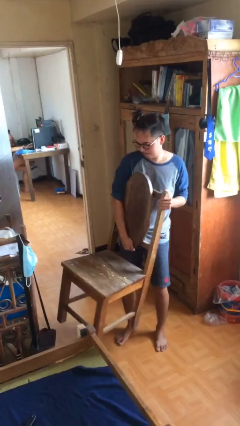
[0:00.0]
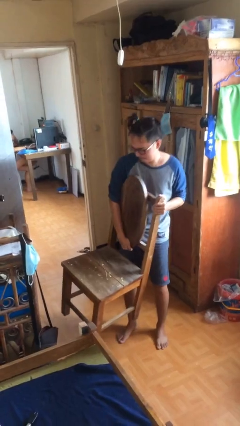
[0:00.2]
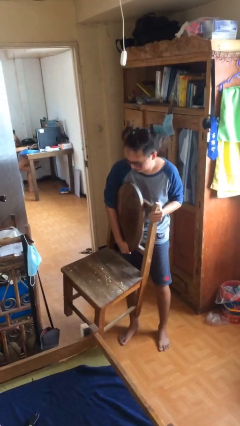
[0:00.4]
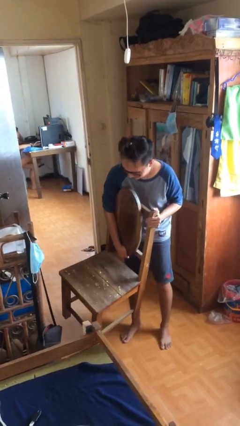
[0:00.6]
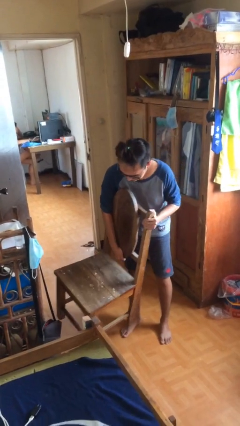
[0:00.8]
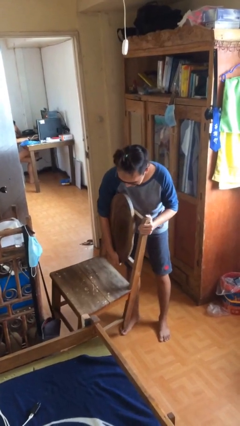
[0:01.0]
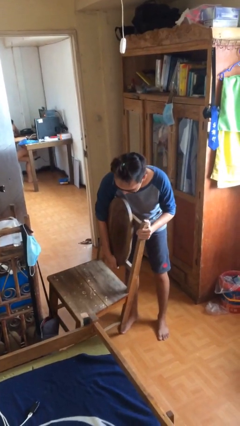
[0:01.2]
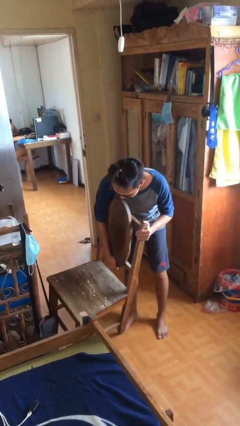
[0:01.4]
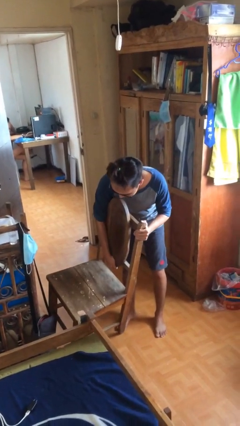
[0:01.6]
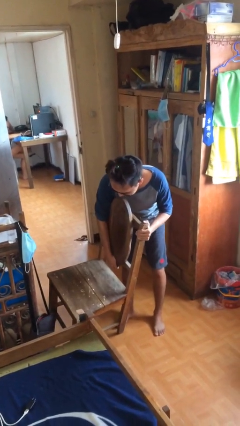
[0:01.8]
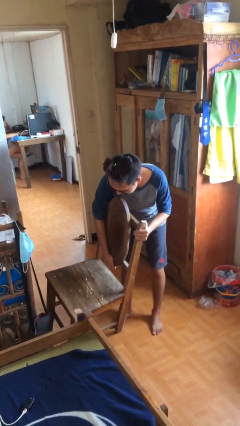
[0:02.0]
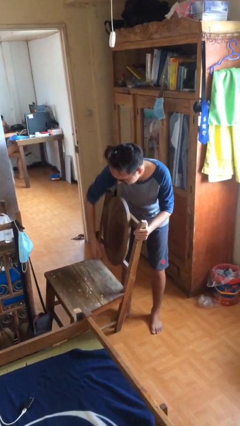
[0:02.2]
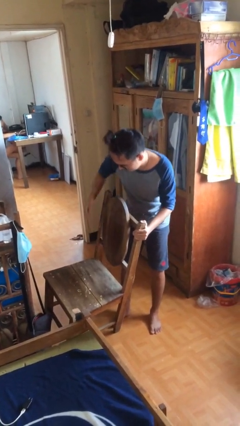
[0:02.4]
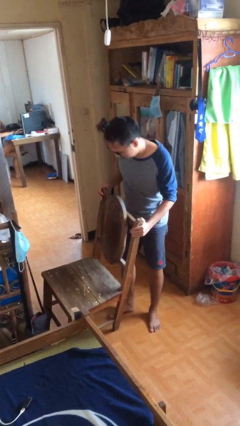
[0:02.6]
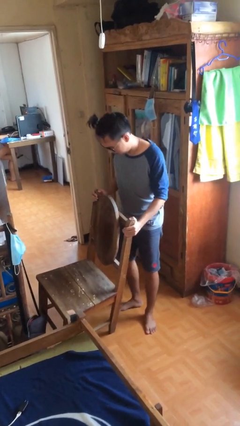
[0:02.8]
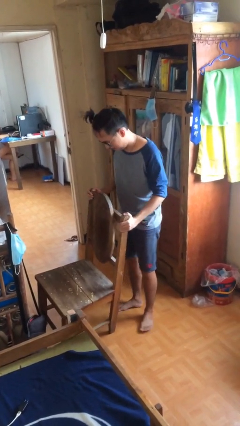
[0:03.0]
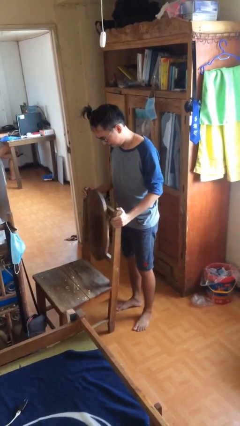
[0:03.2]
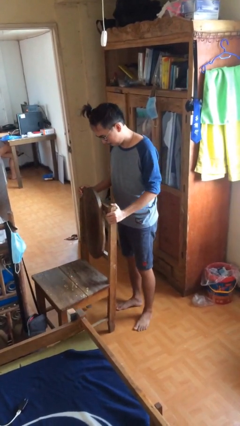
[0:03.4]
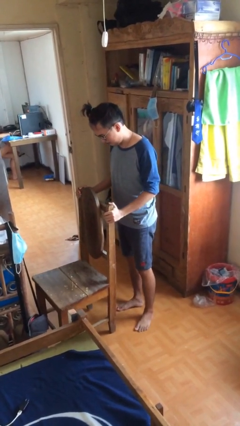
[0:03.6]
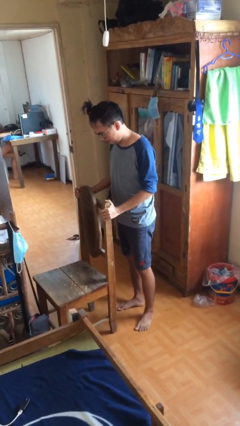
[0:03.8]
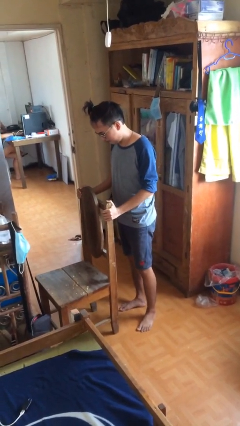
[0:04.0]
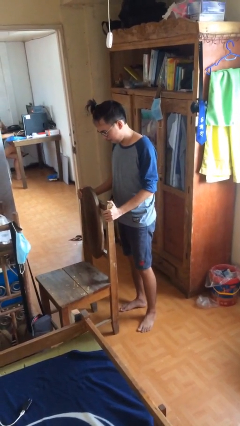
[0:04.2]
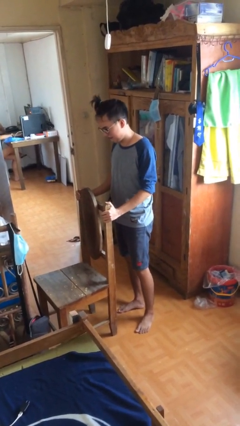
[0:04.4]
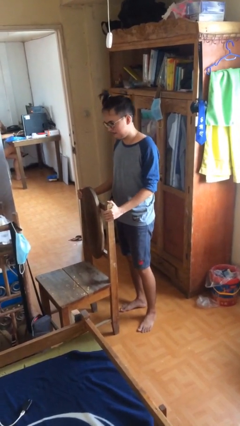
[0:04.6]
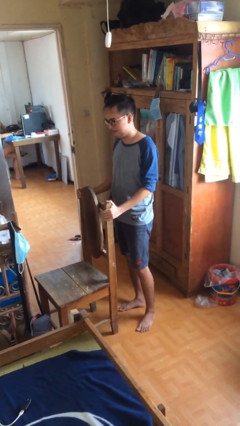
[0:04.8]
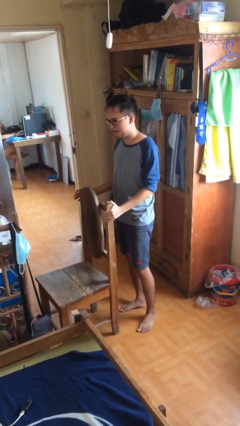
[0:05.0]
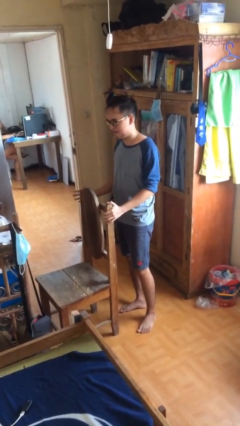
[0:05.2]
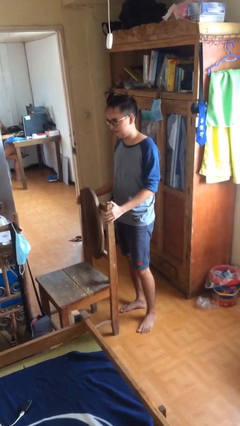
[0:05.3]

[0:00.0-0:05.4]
person puts down object on floor

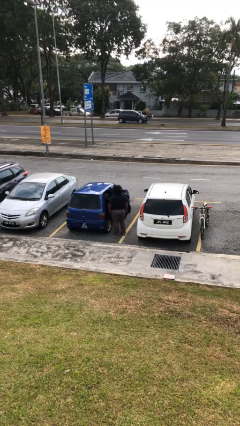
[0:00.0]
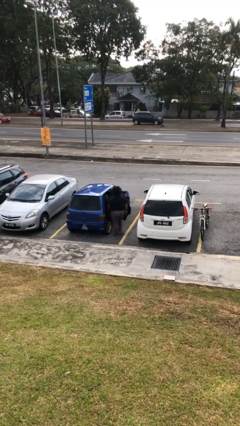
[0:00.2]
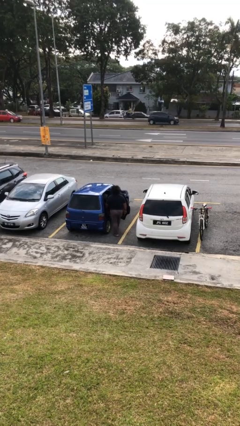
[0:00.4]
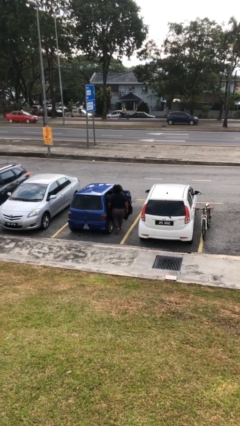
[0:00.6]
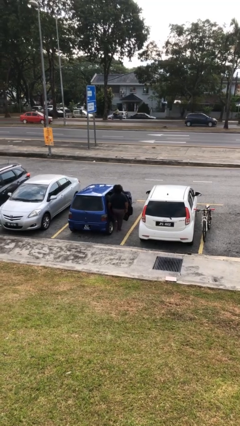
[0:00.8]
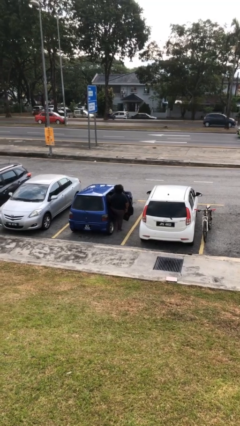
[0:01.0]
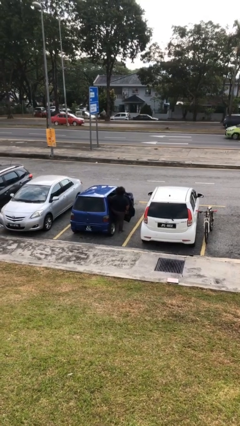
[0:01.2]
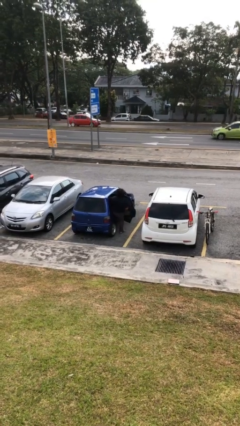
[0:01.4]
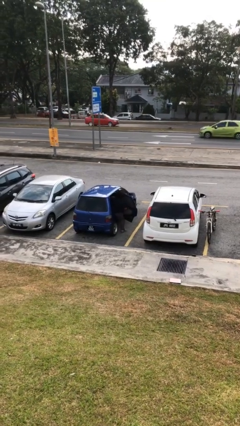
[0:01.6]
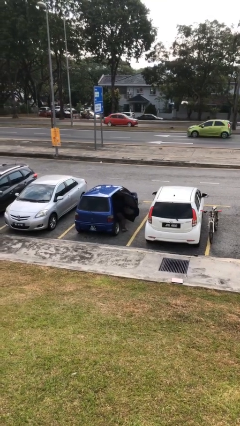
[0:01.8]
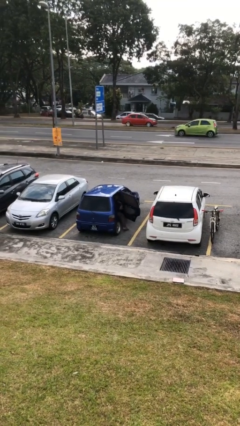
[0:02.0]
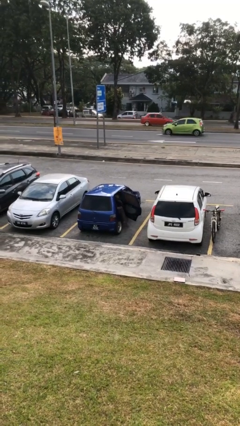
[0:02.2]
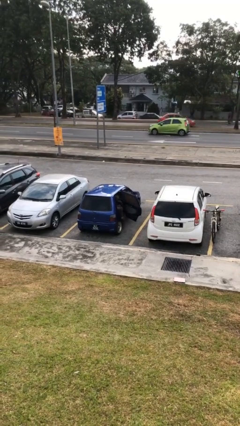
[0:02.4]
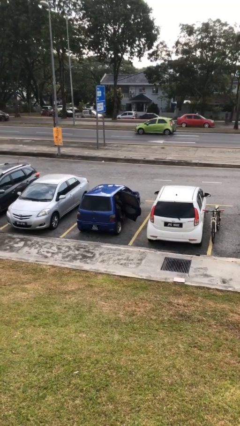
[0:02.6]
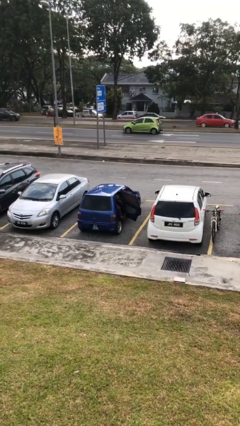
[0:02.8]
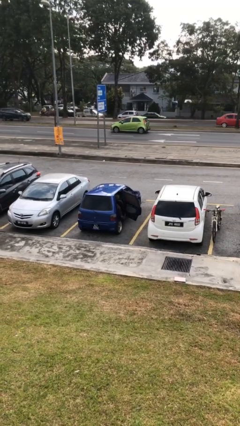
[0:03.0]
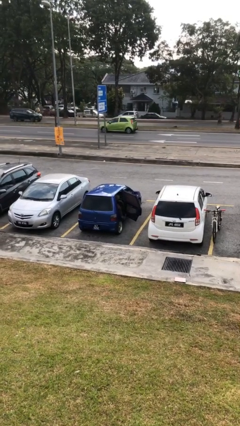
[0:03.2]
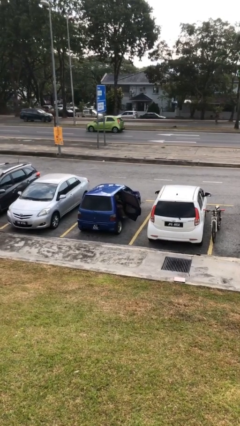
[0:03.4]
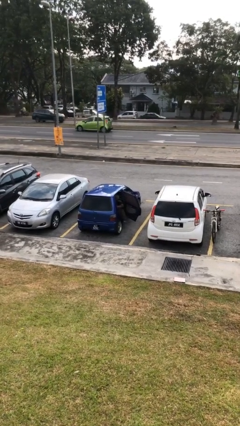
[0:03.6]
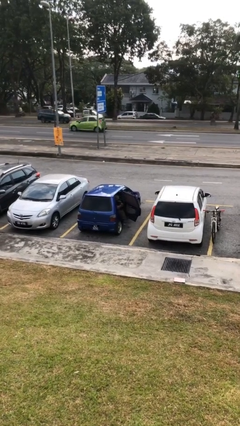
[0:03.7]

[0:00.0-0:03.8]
person enters car

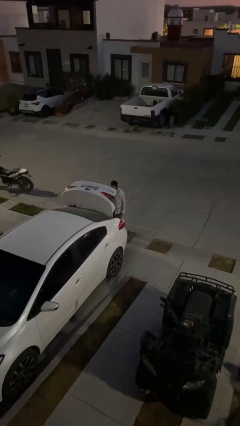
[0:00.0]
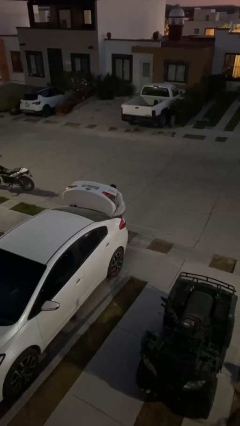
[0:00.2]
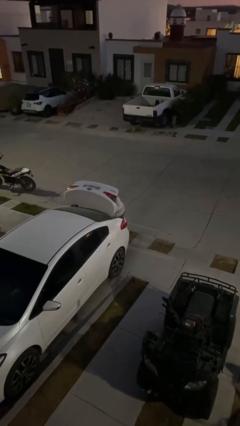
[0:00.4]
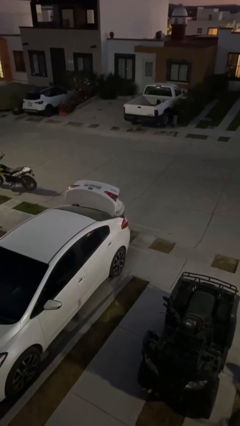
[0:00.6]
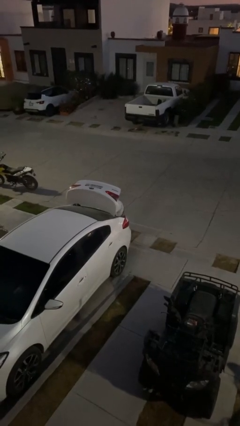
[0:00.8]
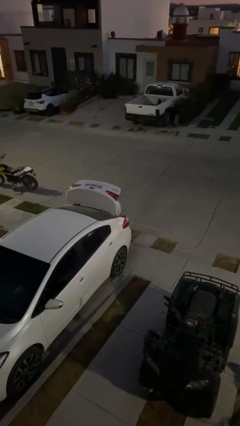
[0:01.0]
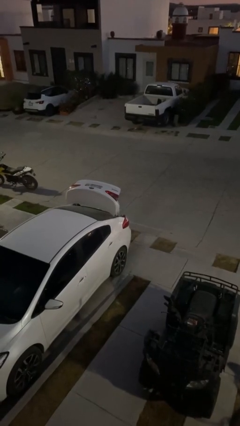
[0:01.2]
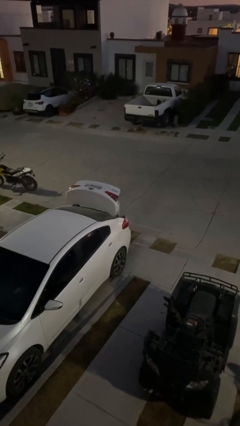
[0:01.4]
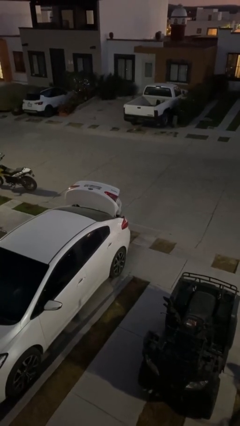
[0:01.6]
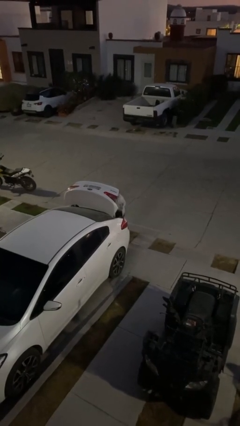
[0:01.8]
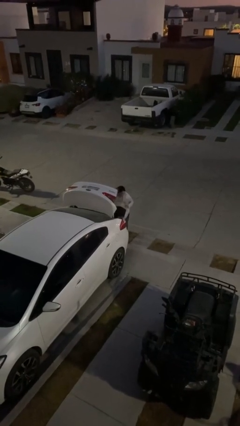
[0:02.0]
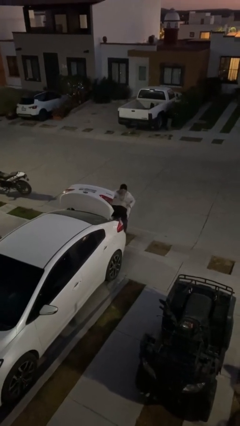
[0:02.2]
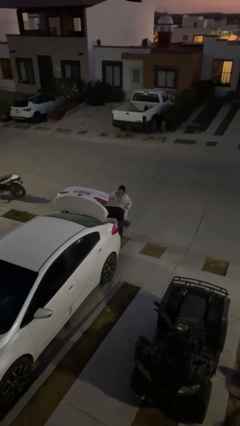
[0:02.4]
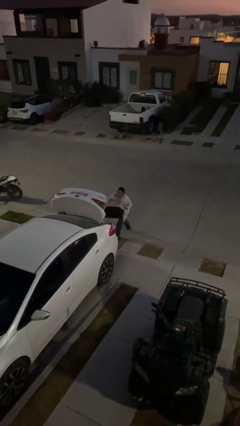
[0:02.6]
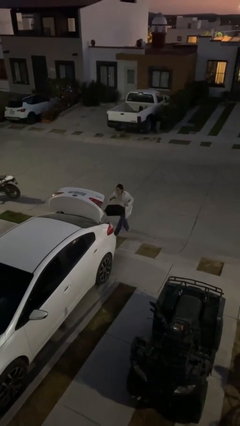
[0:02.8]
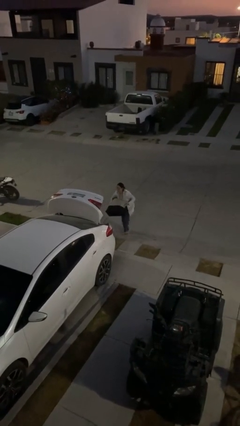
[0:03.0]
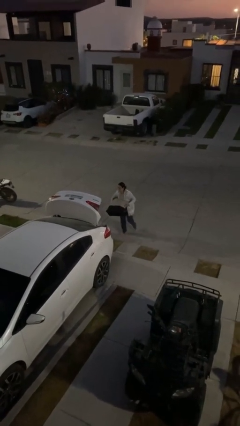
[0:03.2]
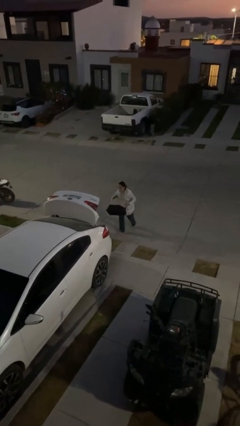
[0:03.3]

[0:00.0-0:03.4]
person unloads car

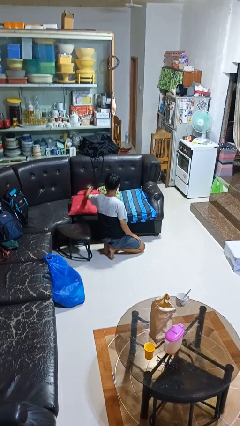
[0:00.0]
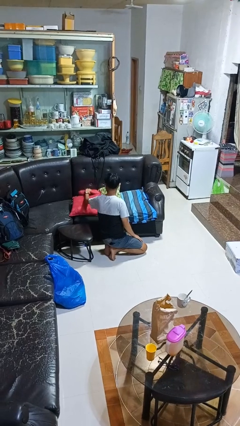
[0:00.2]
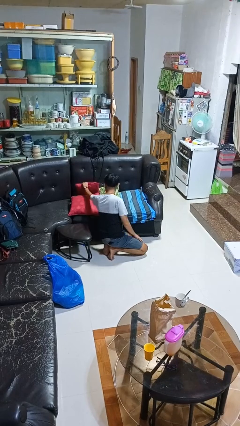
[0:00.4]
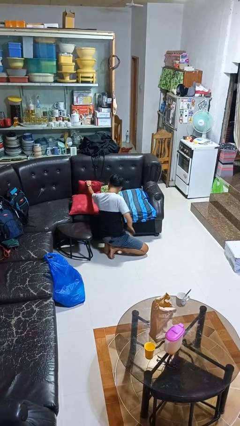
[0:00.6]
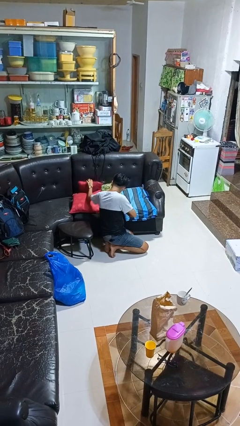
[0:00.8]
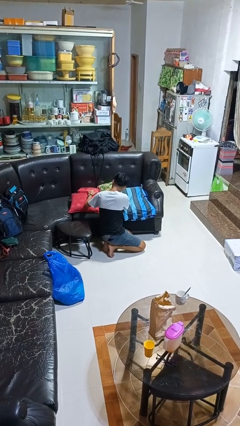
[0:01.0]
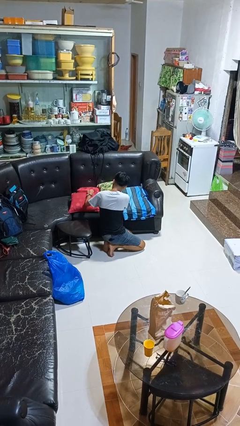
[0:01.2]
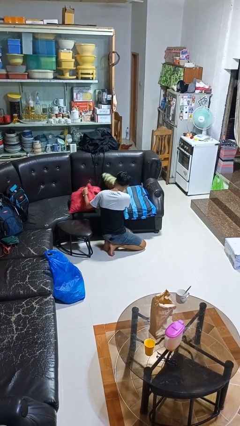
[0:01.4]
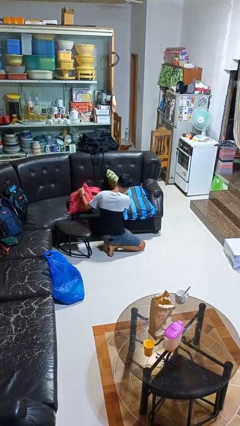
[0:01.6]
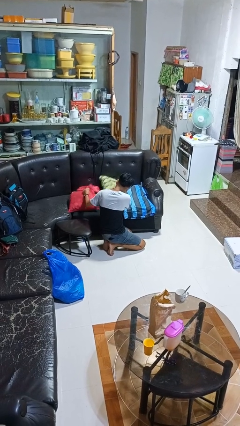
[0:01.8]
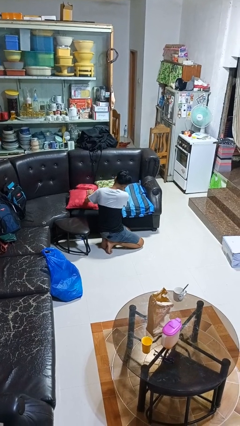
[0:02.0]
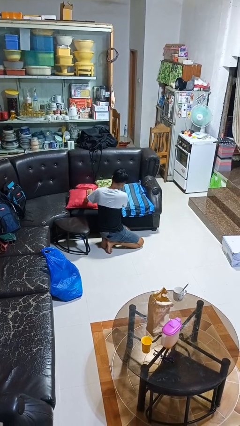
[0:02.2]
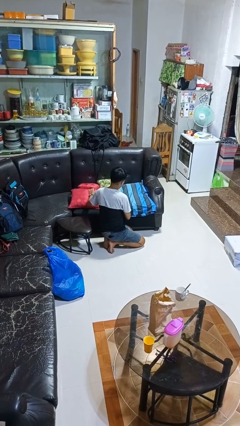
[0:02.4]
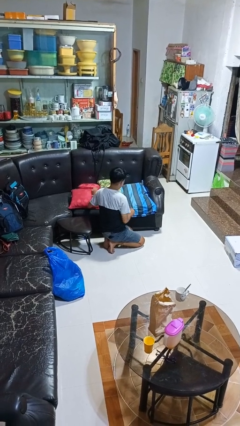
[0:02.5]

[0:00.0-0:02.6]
person searches in couch

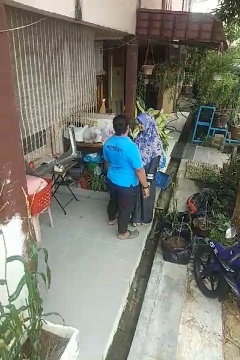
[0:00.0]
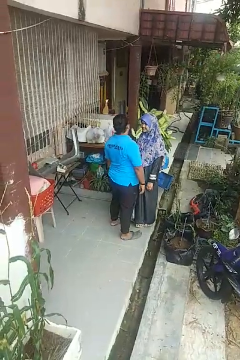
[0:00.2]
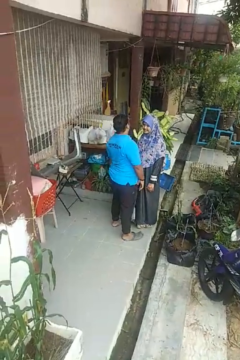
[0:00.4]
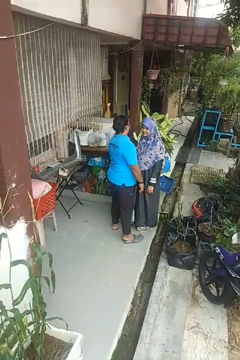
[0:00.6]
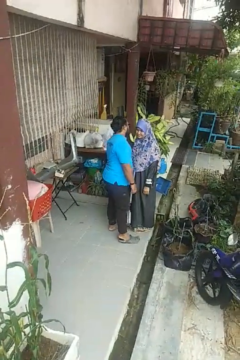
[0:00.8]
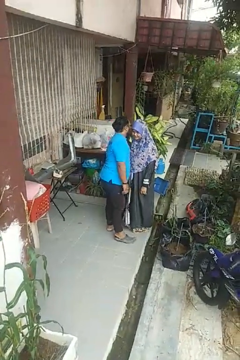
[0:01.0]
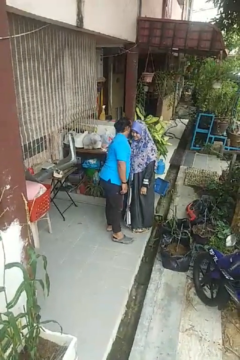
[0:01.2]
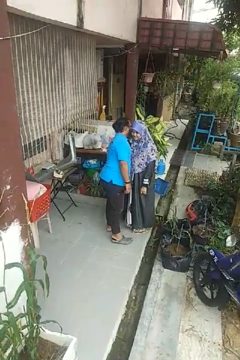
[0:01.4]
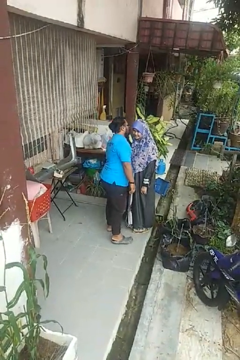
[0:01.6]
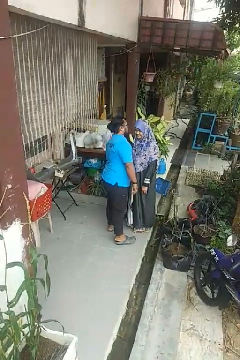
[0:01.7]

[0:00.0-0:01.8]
person kisses cheek of person

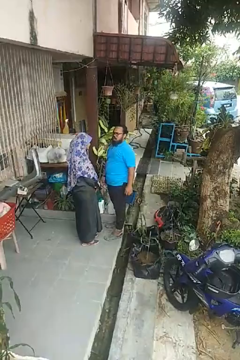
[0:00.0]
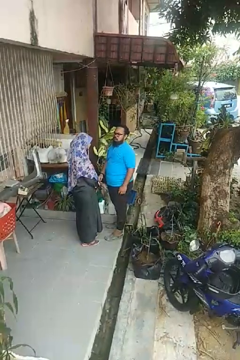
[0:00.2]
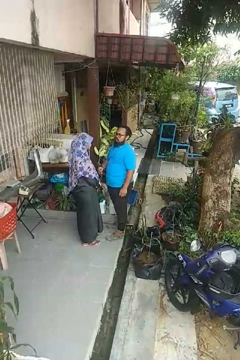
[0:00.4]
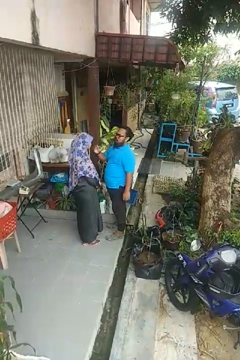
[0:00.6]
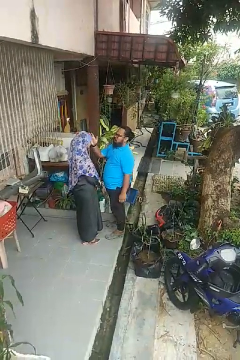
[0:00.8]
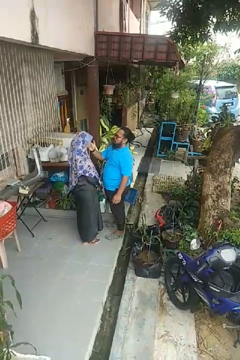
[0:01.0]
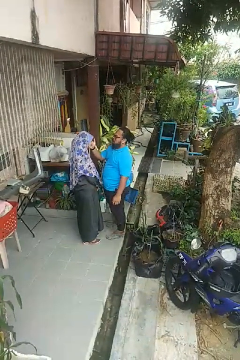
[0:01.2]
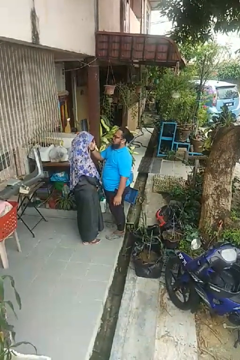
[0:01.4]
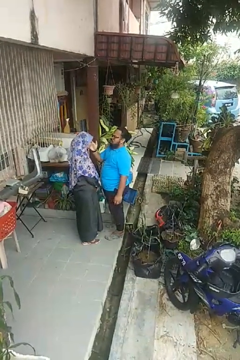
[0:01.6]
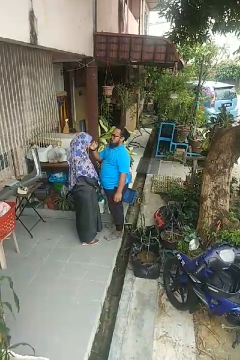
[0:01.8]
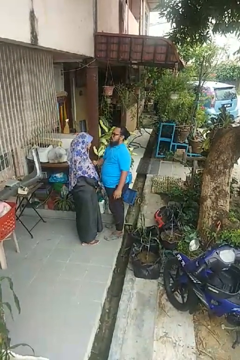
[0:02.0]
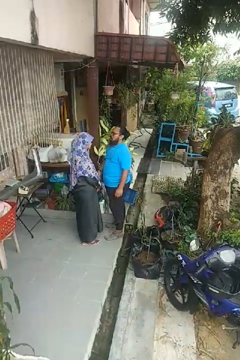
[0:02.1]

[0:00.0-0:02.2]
person touches face of person
